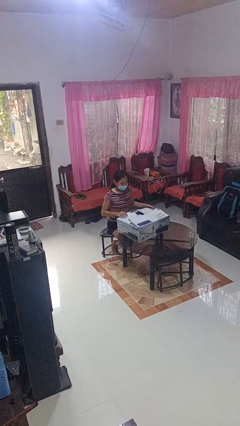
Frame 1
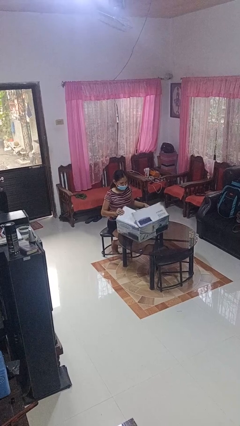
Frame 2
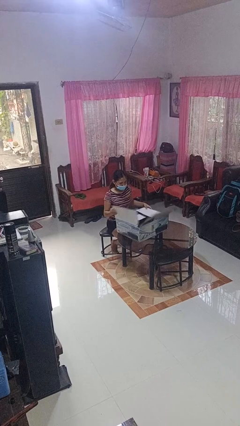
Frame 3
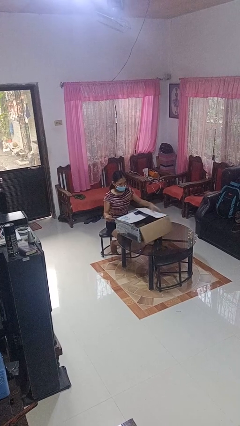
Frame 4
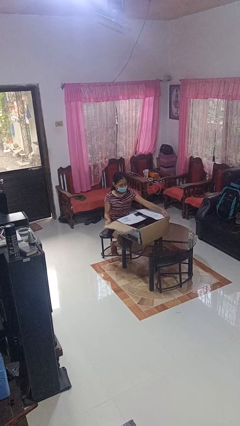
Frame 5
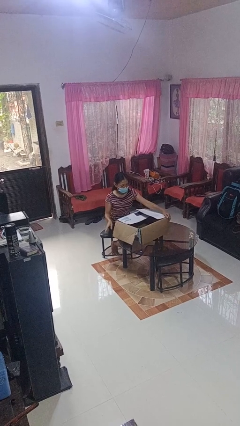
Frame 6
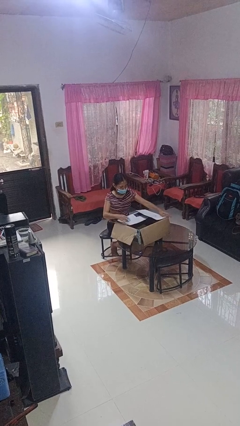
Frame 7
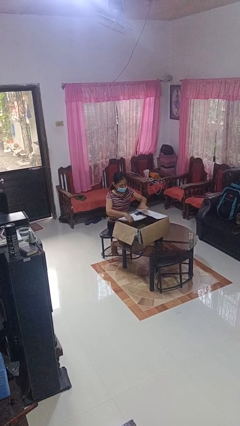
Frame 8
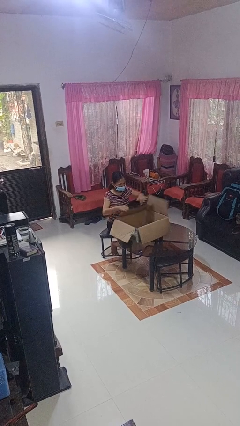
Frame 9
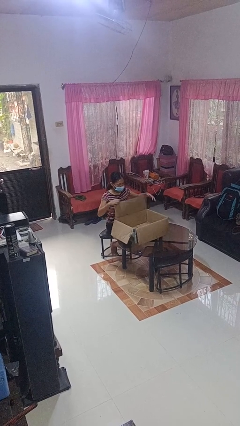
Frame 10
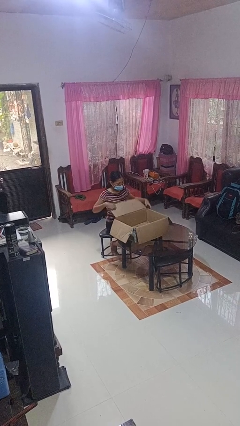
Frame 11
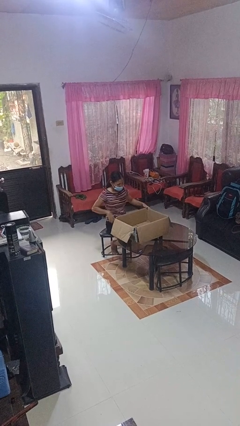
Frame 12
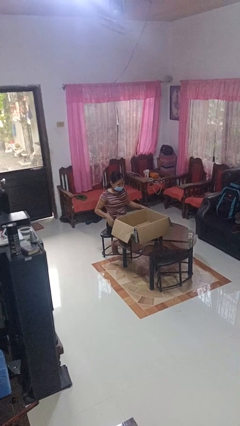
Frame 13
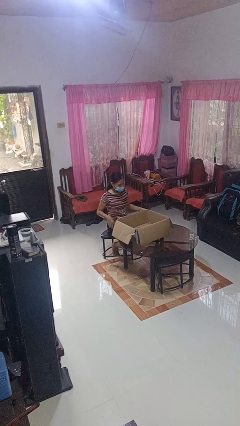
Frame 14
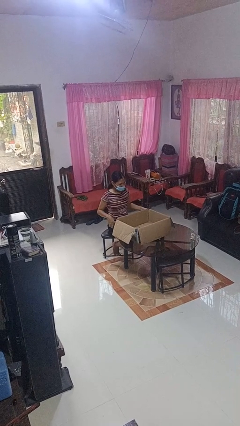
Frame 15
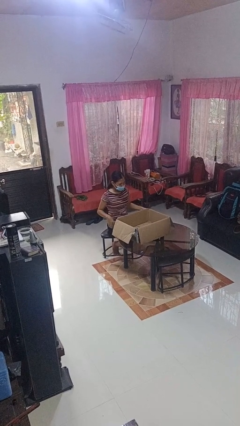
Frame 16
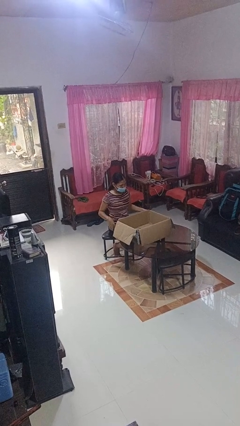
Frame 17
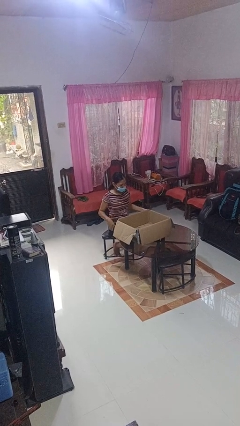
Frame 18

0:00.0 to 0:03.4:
person opens box

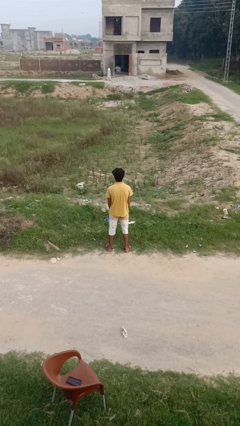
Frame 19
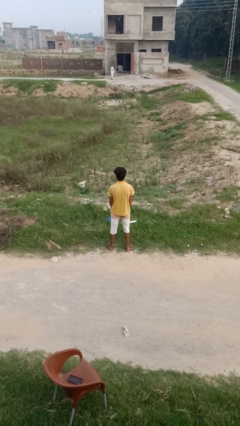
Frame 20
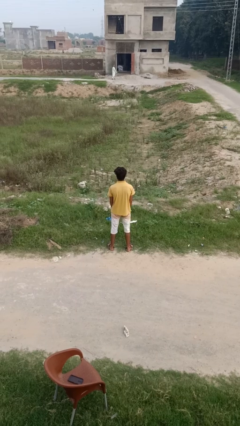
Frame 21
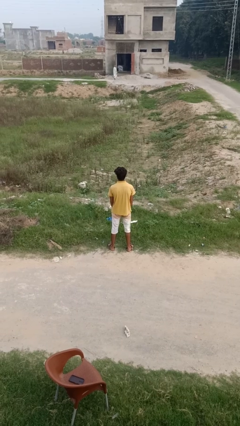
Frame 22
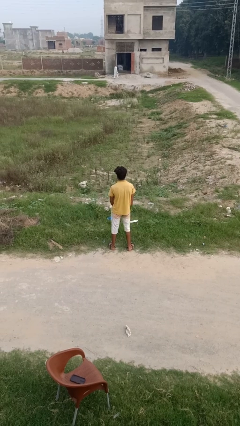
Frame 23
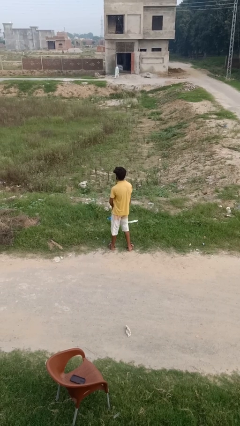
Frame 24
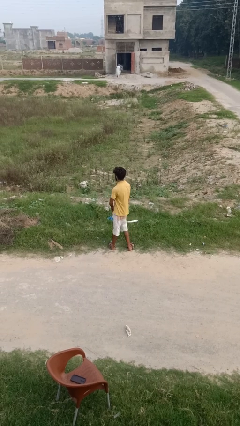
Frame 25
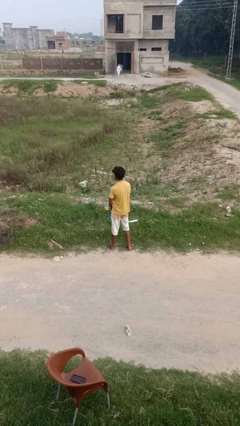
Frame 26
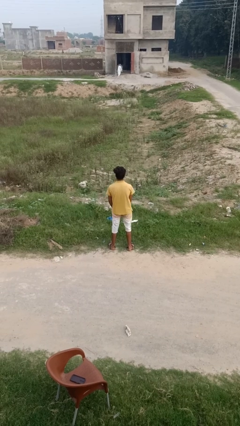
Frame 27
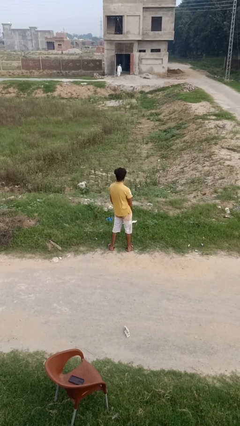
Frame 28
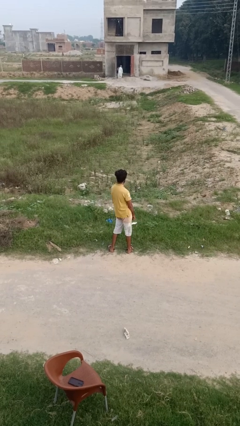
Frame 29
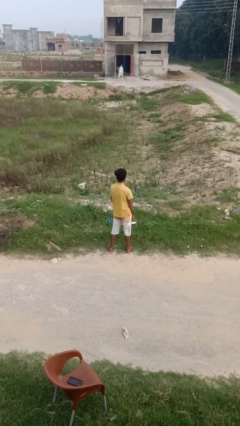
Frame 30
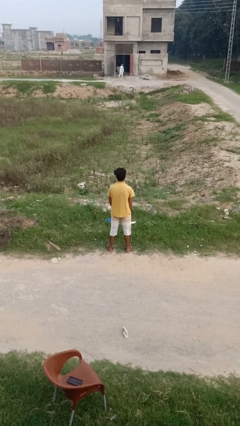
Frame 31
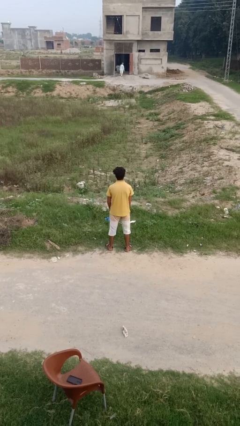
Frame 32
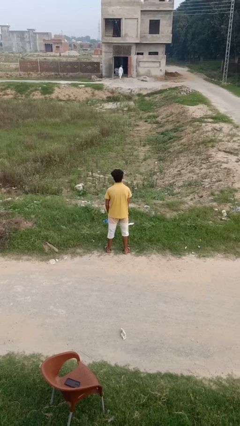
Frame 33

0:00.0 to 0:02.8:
person twirls

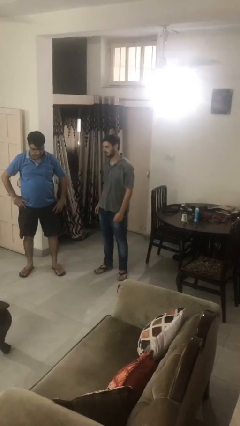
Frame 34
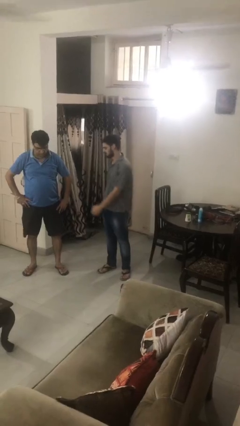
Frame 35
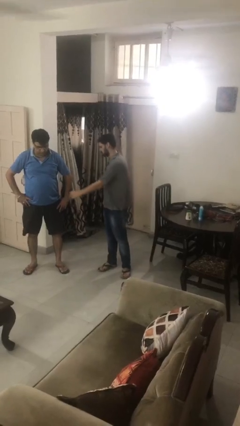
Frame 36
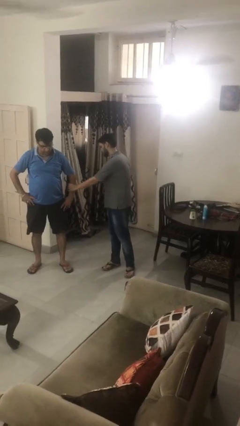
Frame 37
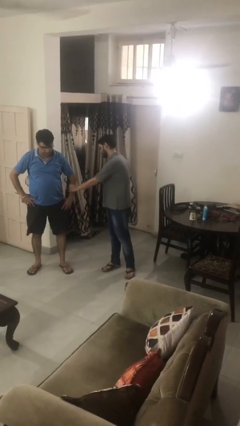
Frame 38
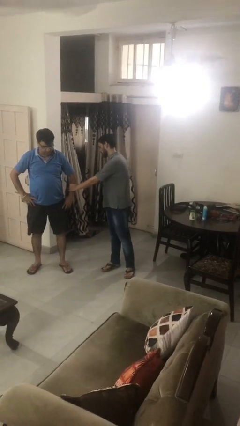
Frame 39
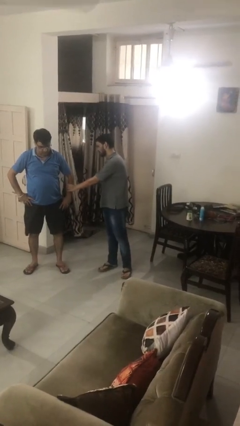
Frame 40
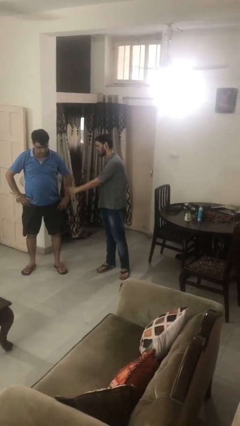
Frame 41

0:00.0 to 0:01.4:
person grabs person by forearm

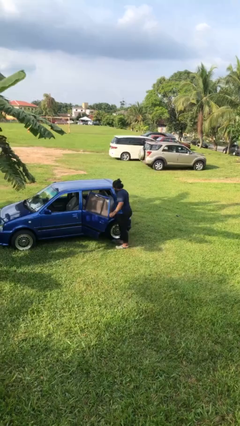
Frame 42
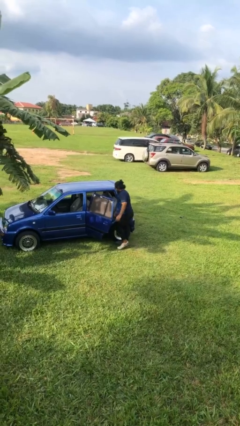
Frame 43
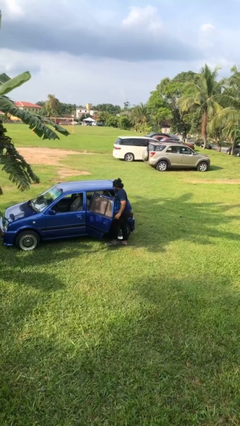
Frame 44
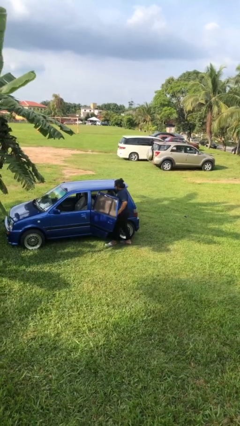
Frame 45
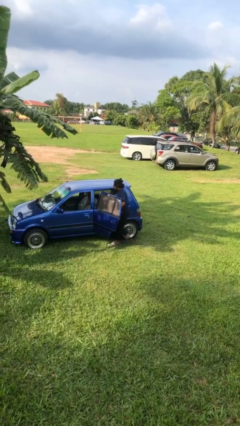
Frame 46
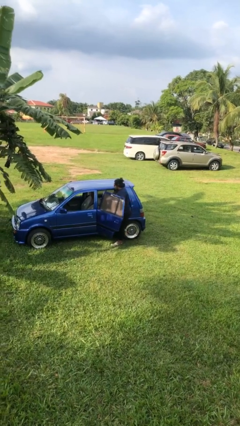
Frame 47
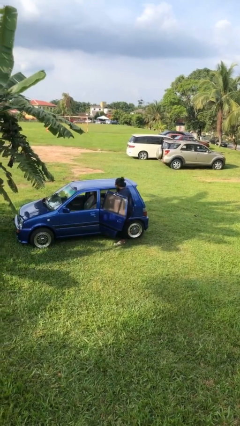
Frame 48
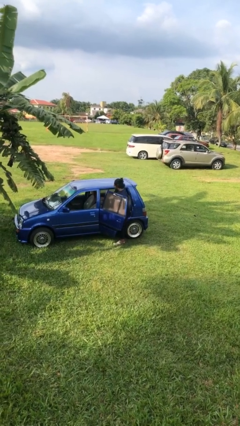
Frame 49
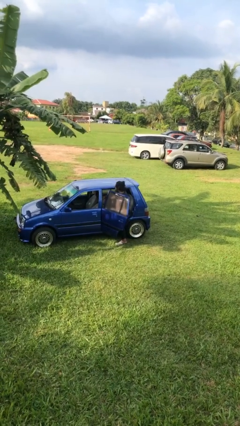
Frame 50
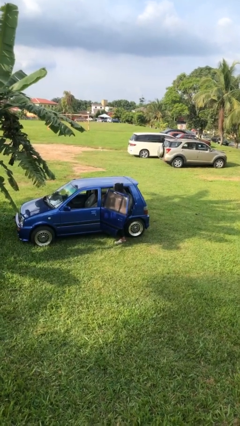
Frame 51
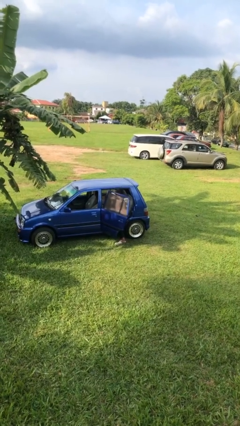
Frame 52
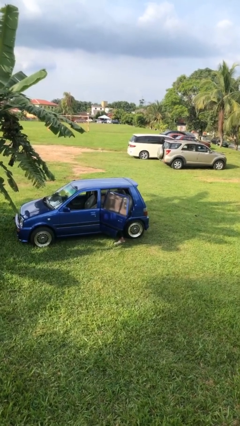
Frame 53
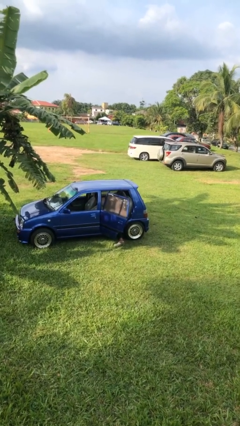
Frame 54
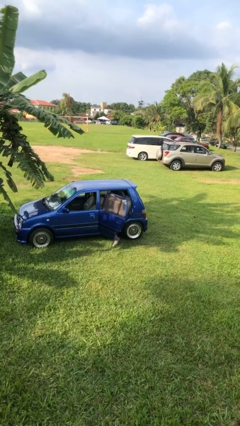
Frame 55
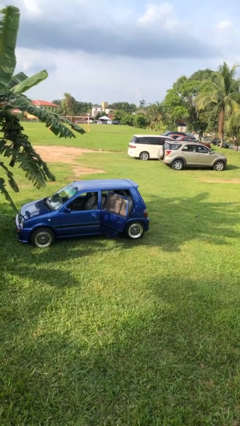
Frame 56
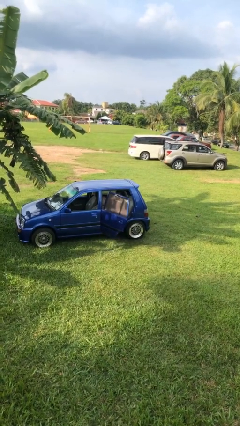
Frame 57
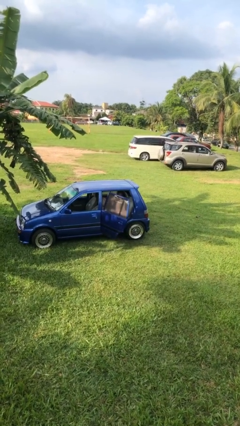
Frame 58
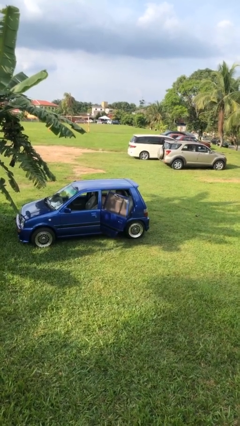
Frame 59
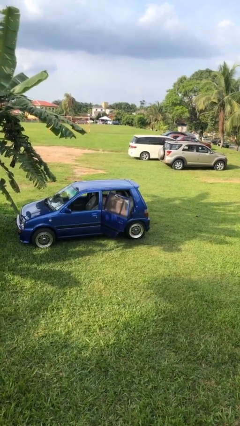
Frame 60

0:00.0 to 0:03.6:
person enters car

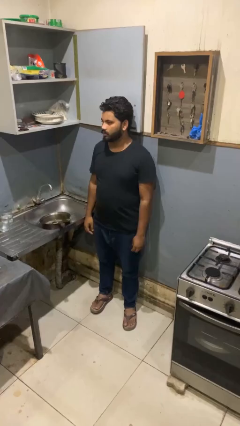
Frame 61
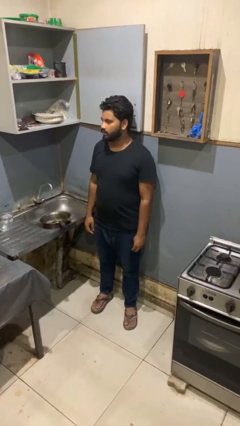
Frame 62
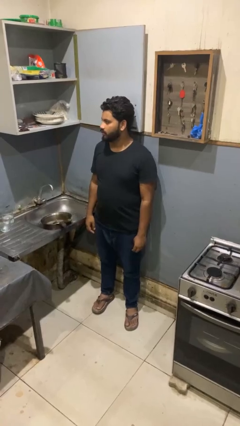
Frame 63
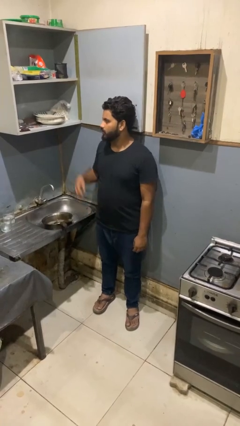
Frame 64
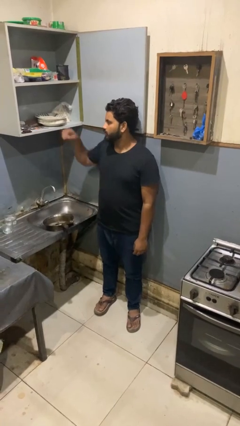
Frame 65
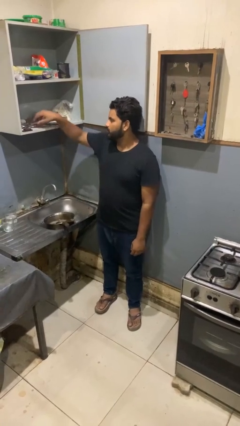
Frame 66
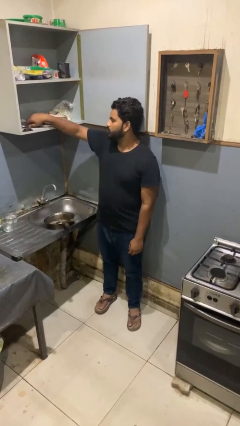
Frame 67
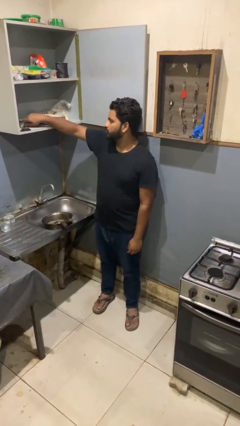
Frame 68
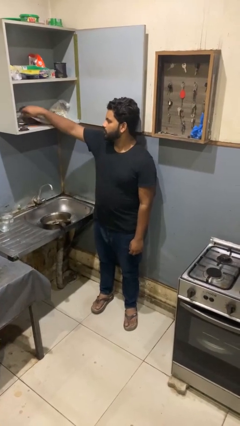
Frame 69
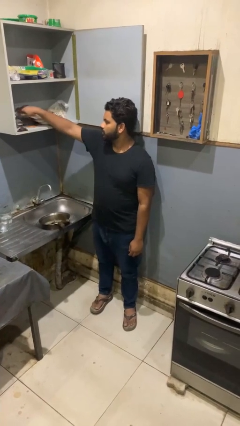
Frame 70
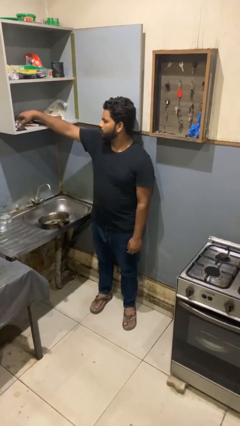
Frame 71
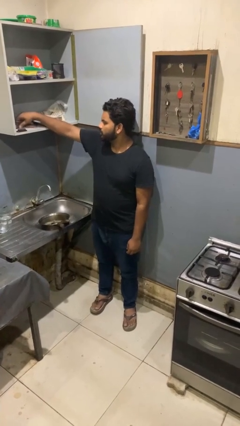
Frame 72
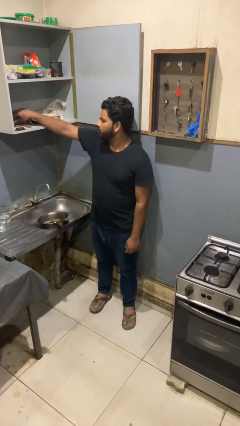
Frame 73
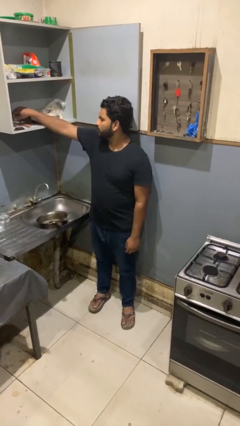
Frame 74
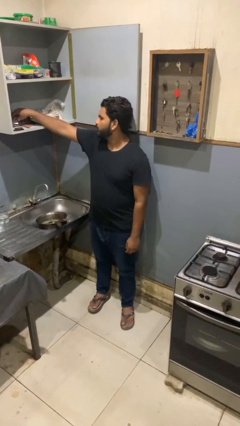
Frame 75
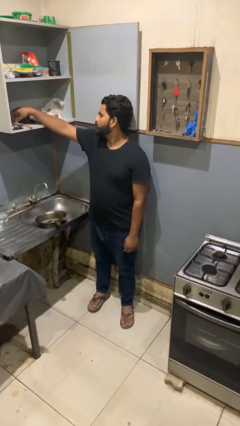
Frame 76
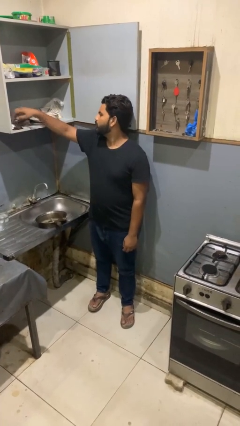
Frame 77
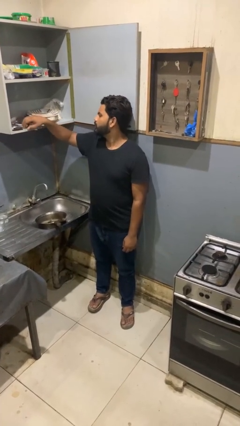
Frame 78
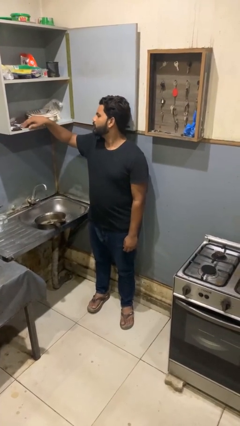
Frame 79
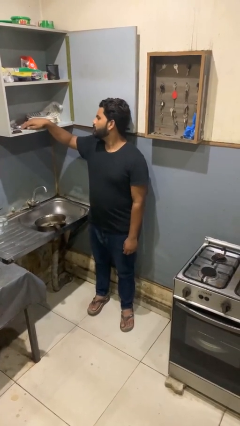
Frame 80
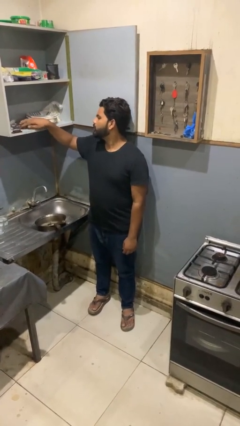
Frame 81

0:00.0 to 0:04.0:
person searches in kitchen drawer

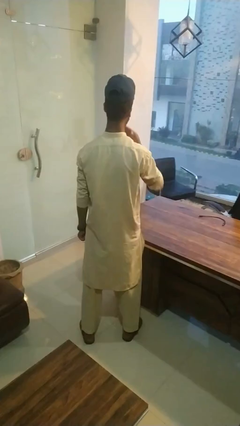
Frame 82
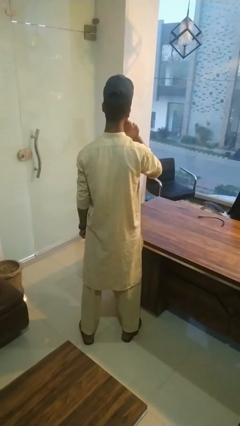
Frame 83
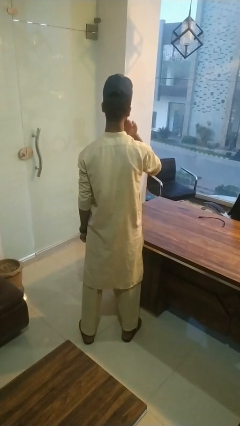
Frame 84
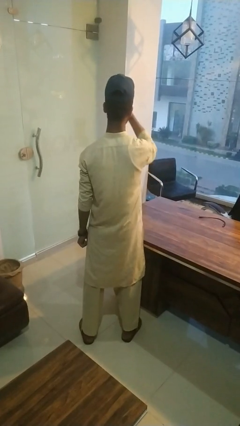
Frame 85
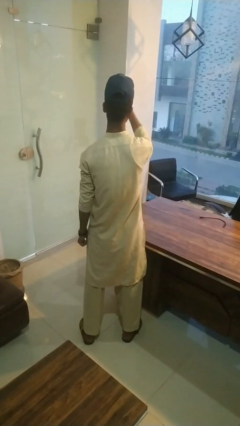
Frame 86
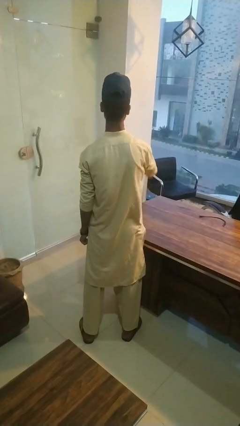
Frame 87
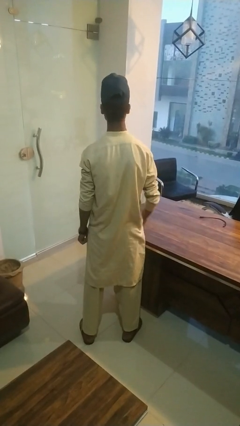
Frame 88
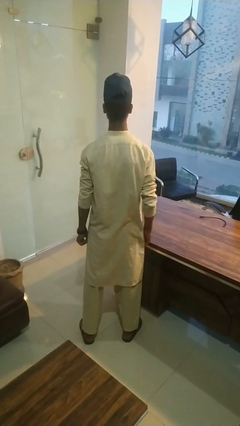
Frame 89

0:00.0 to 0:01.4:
person gestures blow kiss

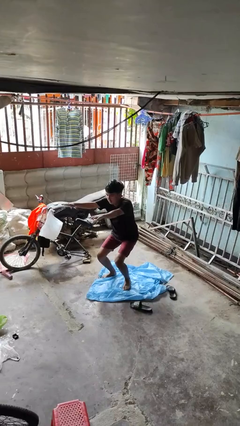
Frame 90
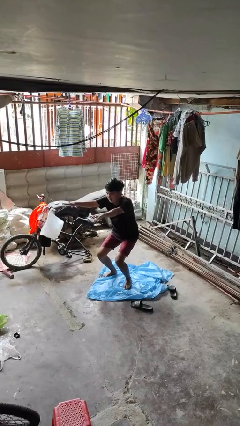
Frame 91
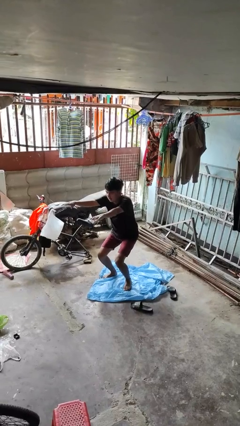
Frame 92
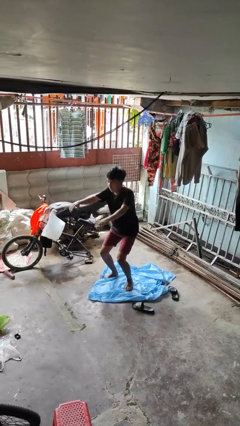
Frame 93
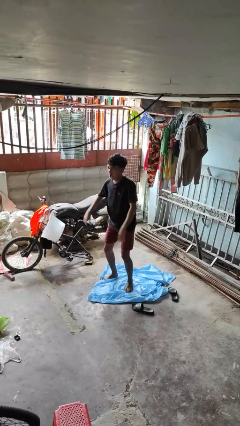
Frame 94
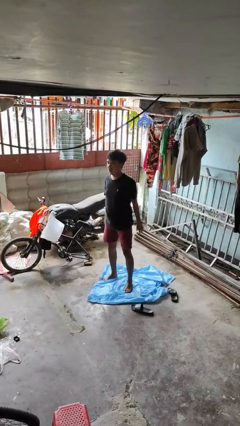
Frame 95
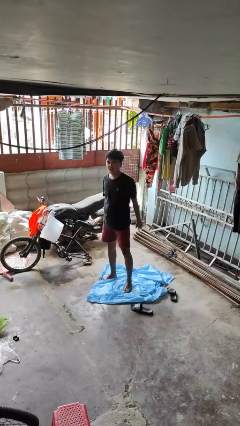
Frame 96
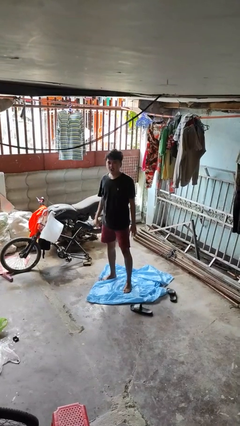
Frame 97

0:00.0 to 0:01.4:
person stands up
